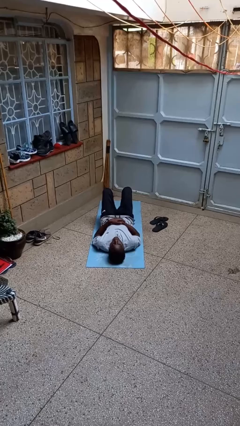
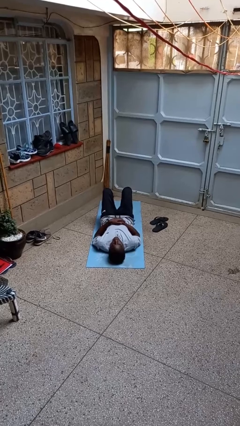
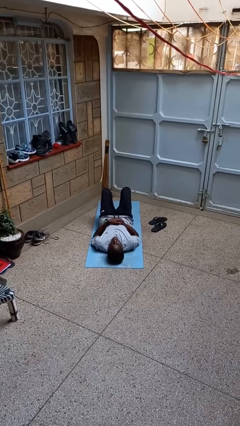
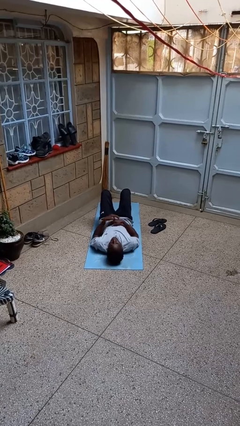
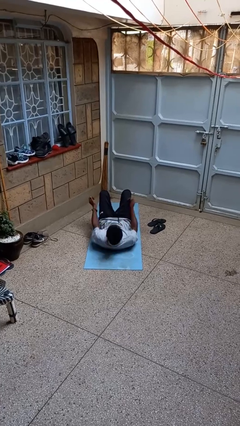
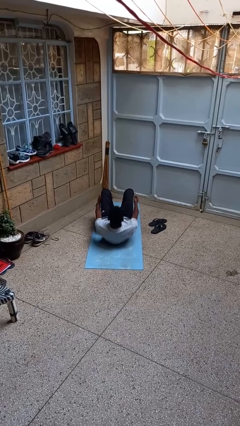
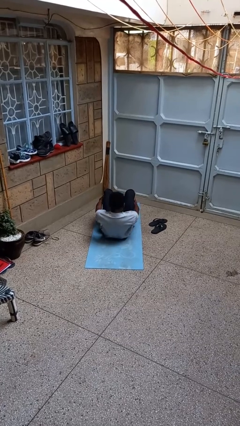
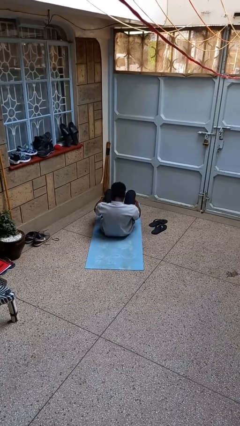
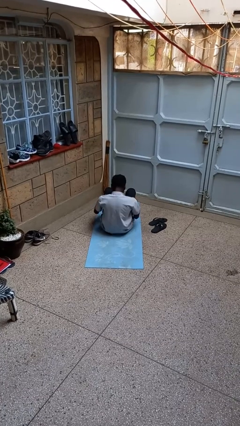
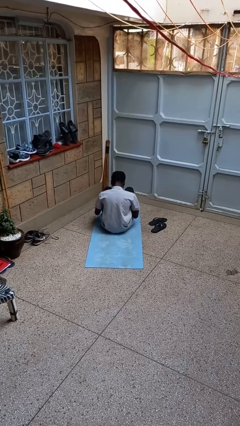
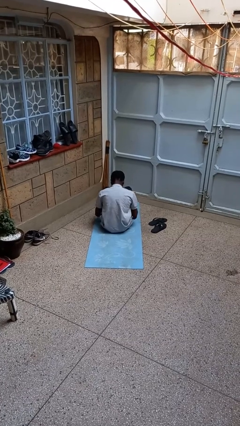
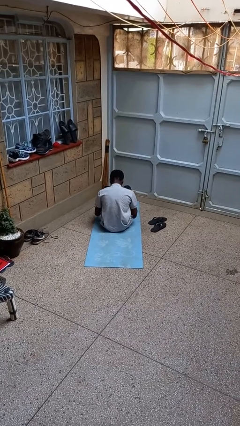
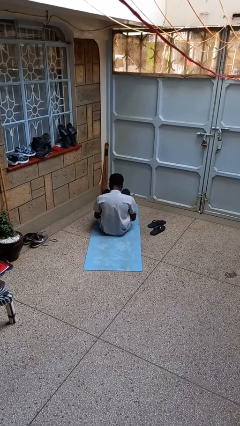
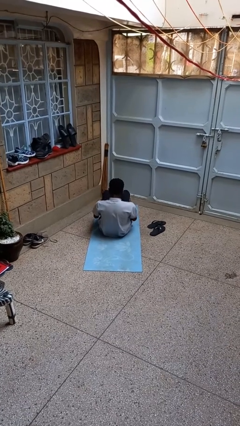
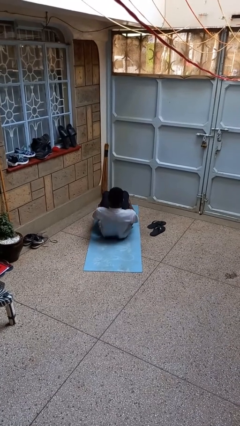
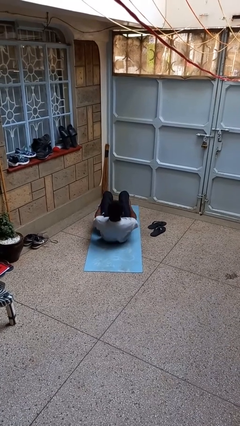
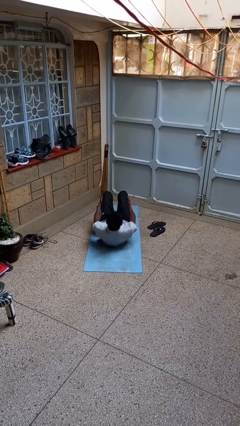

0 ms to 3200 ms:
person exercises with pushup

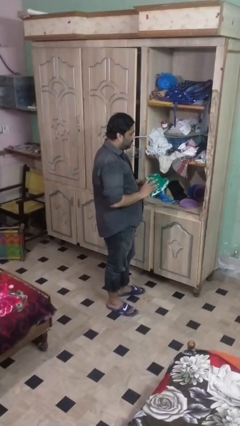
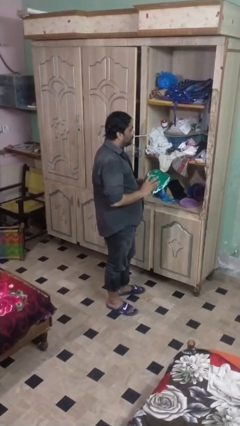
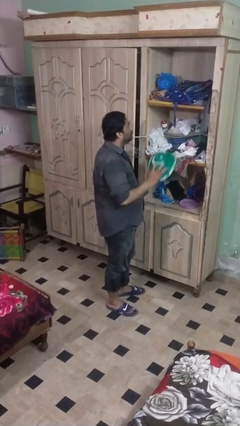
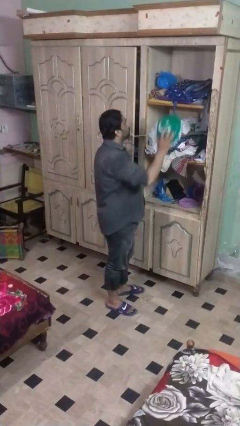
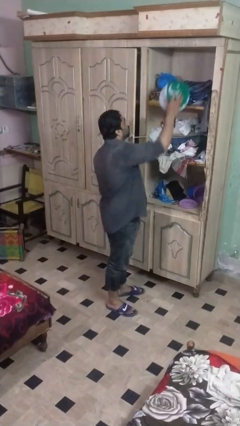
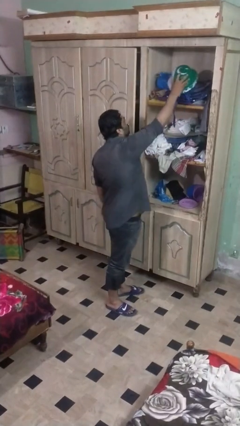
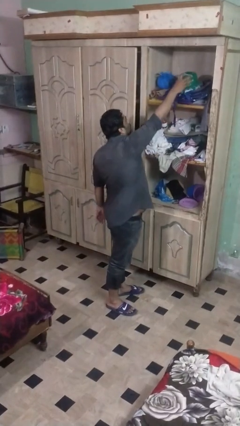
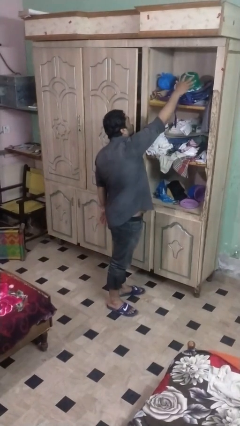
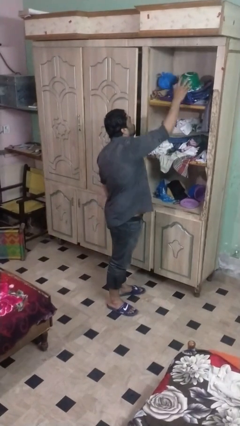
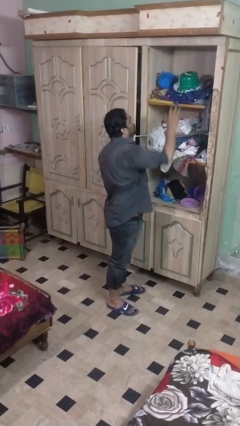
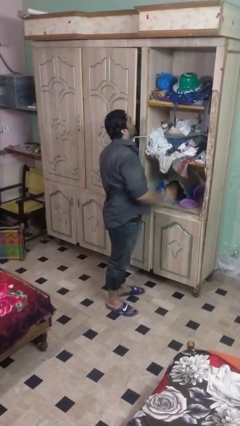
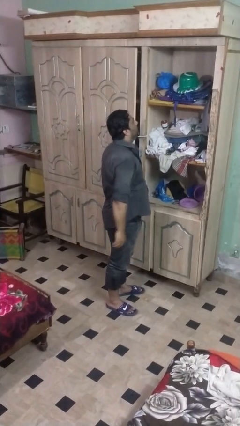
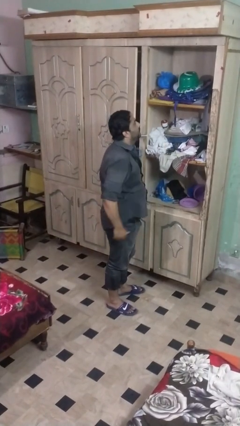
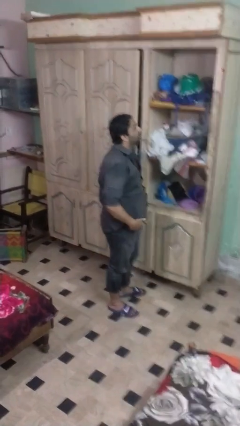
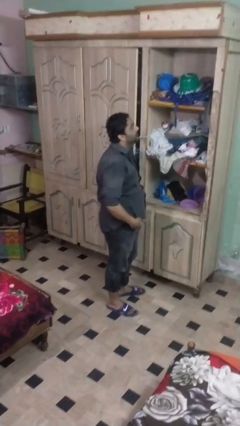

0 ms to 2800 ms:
person puts down object on shelf

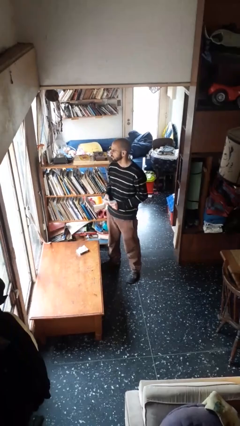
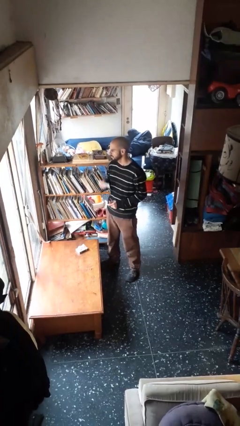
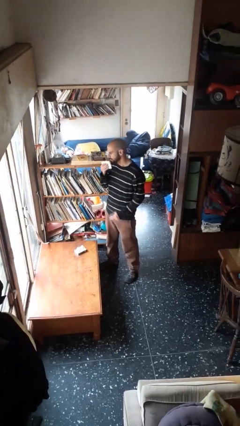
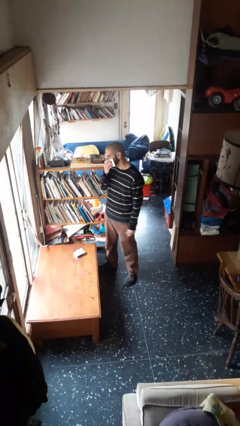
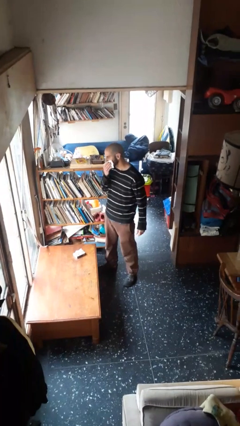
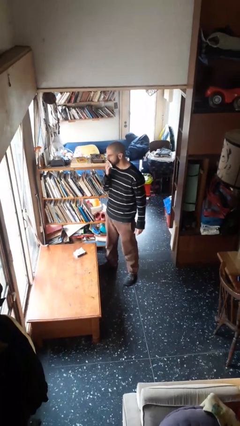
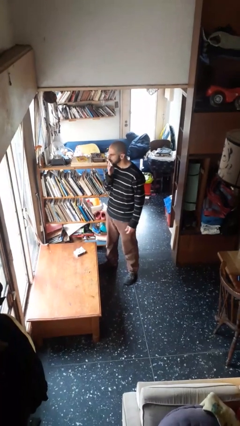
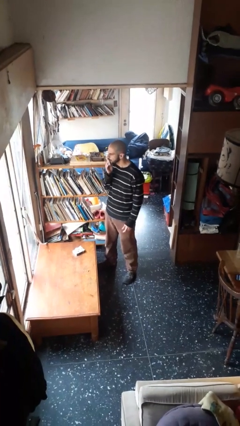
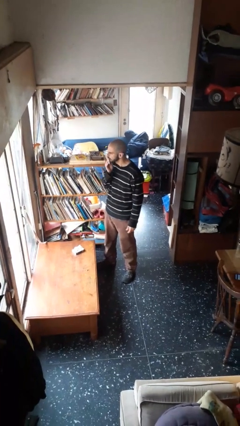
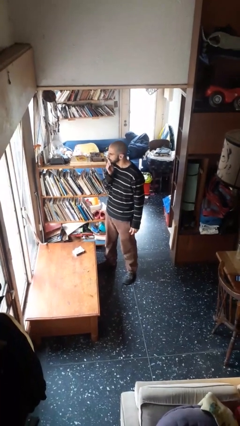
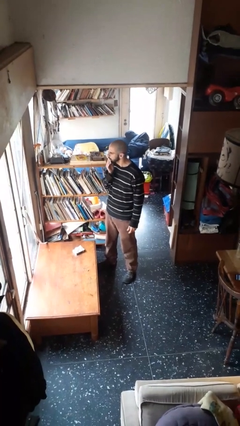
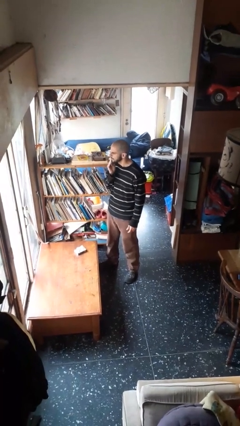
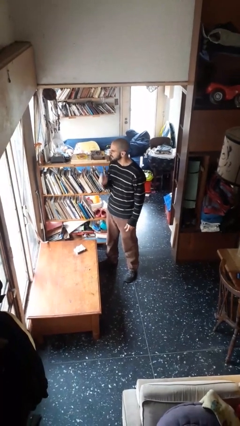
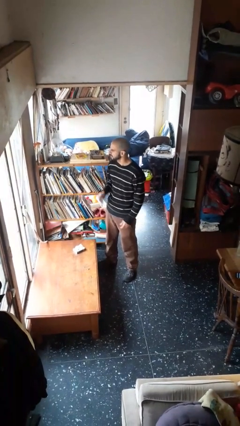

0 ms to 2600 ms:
person wipes mouth with napkin

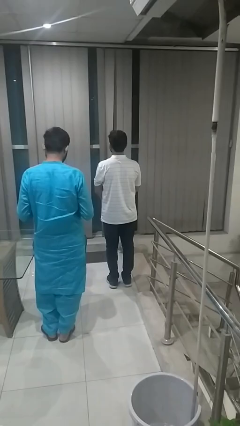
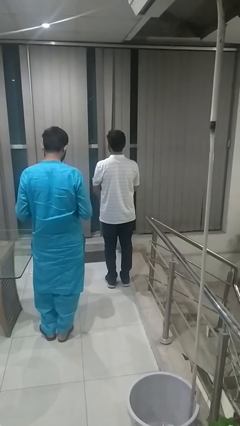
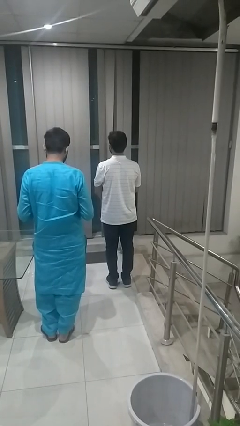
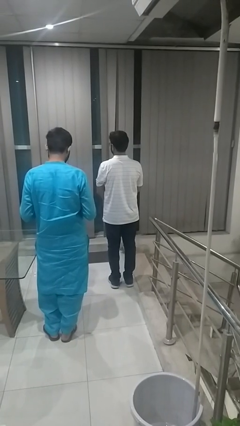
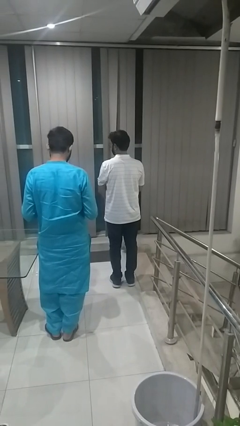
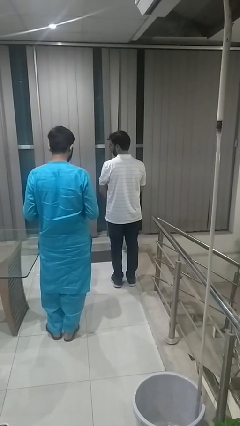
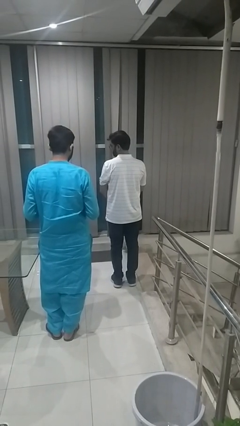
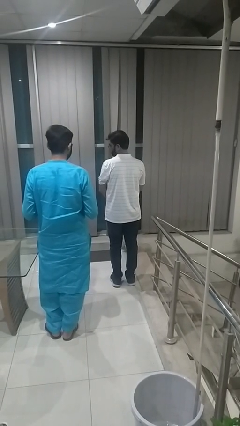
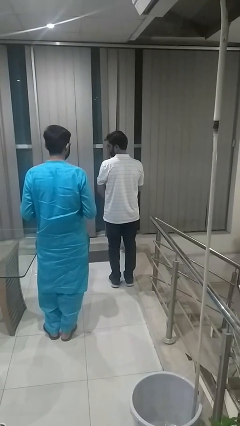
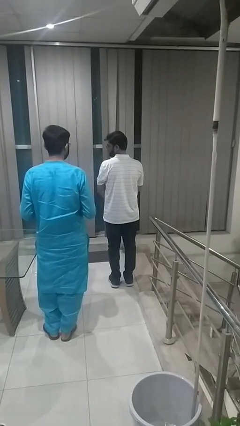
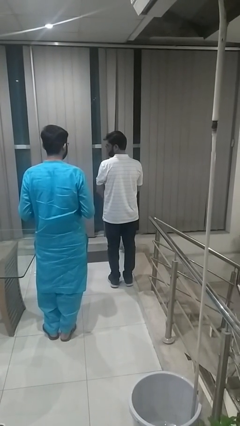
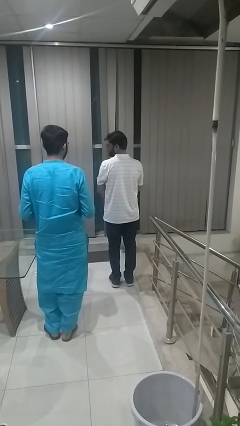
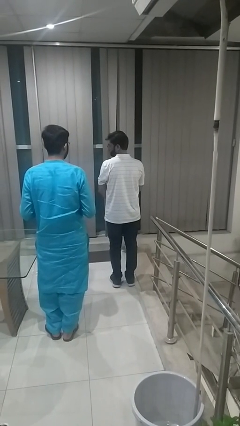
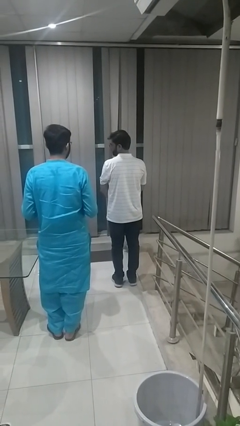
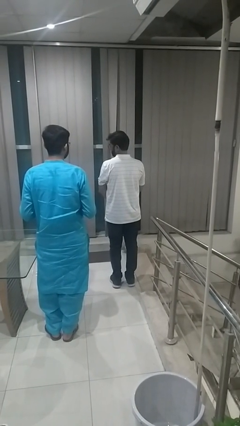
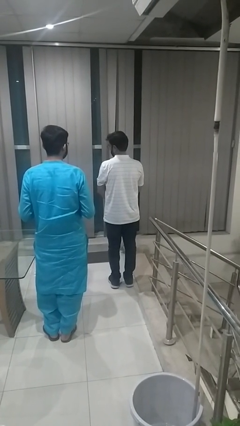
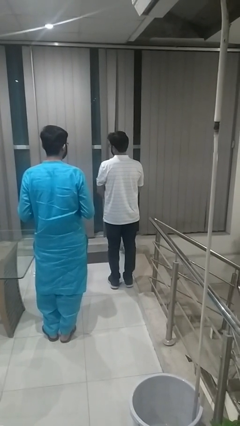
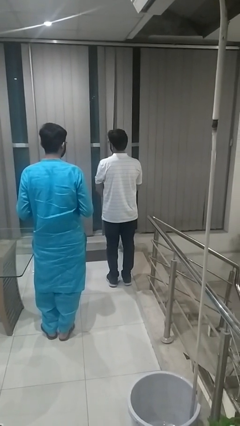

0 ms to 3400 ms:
person looks over shoulder

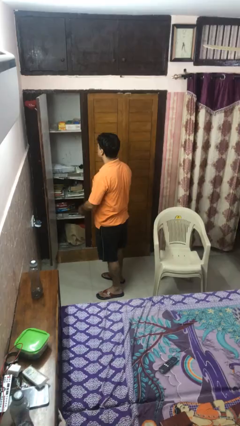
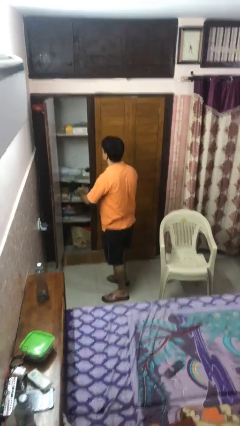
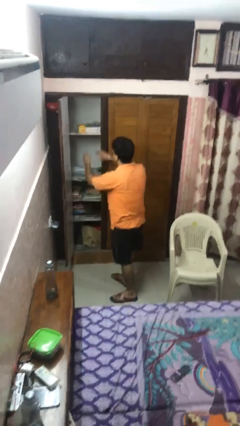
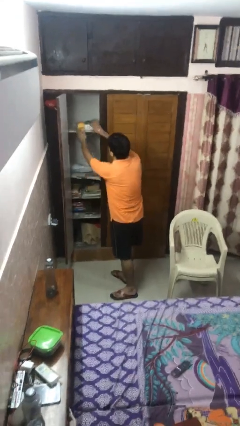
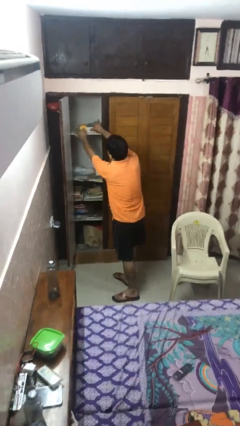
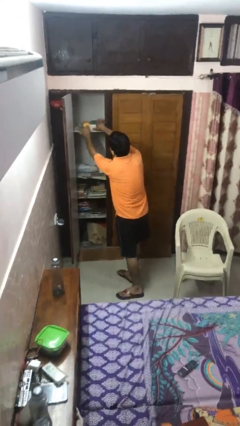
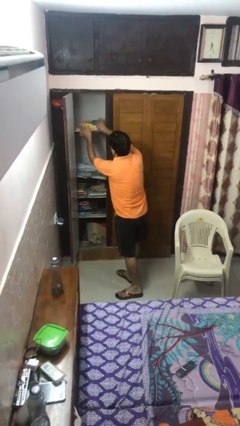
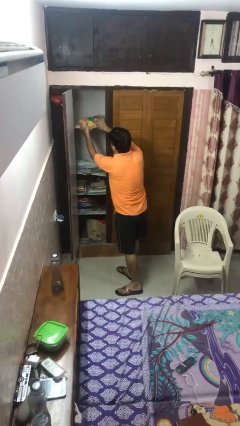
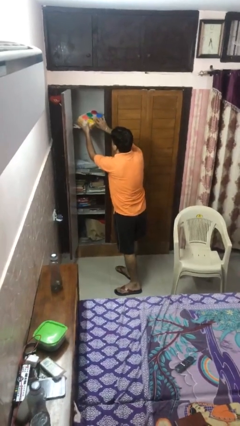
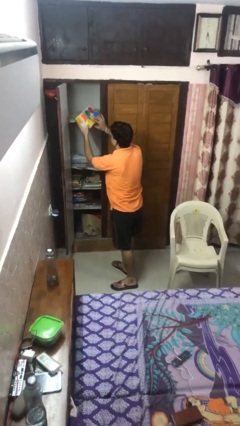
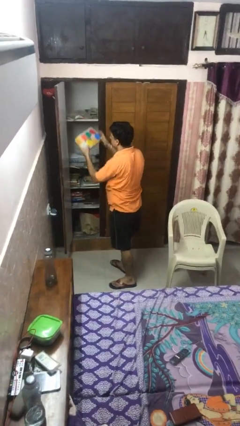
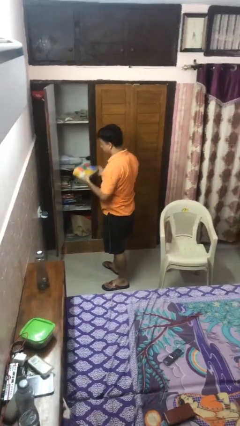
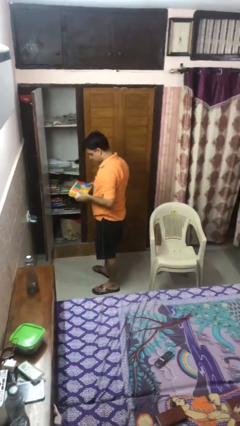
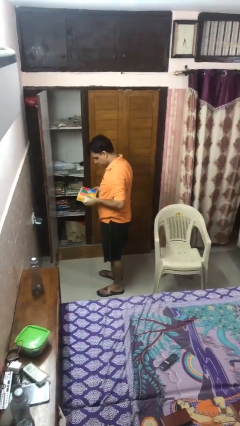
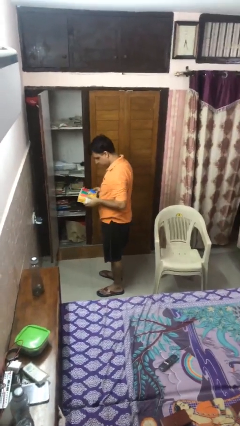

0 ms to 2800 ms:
person picks up object from shelf

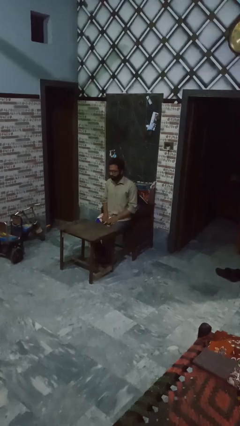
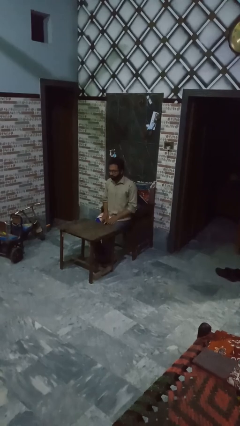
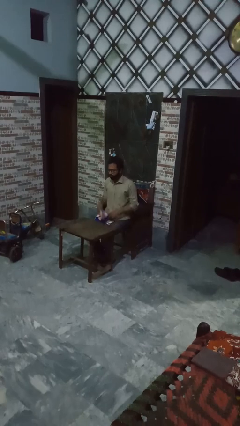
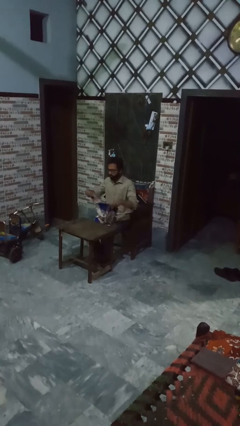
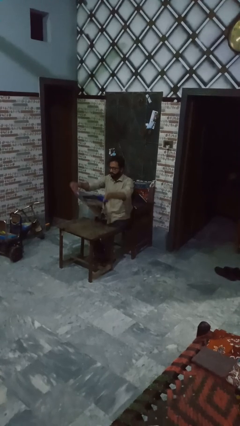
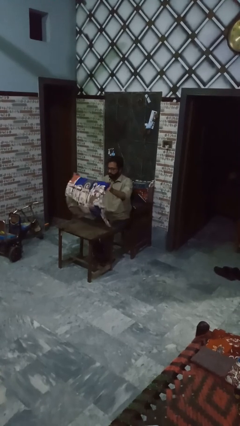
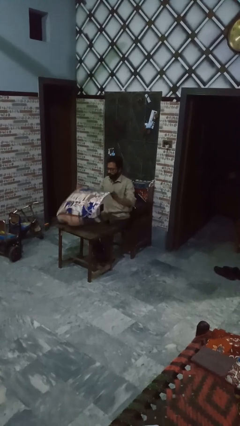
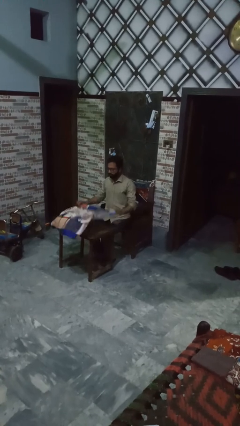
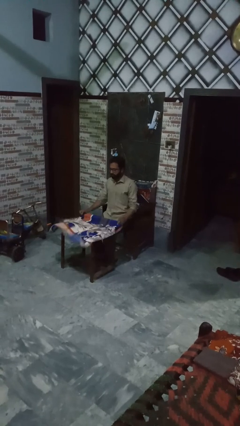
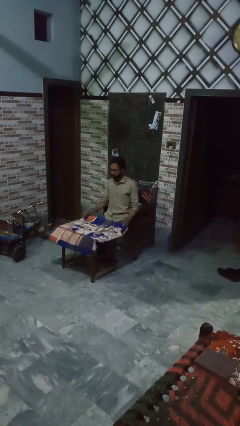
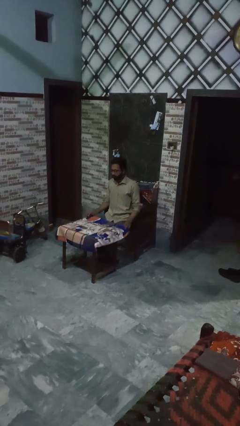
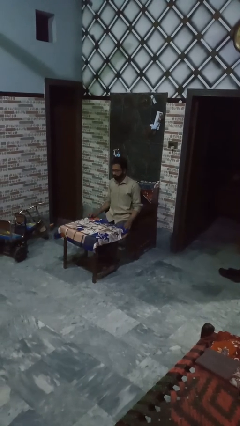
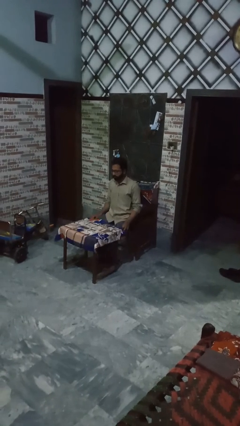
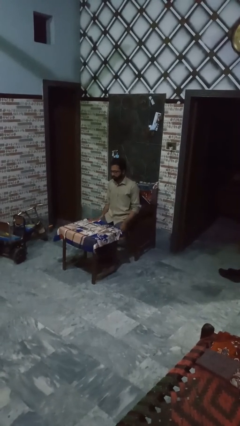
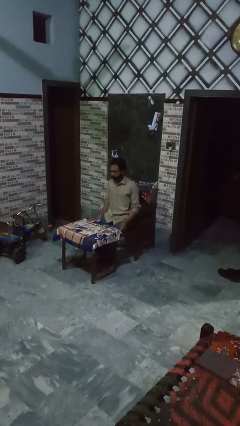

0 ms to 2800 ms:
person folds tablecloth
